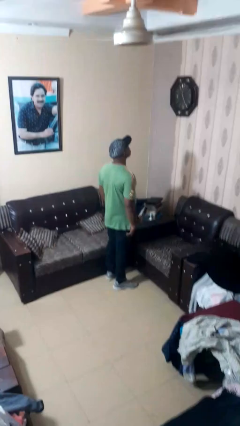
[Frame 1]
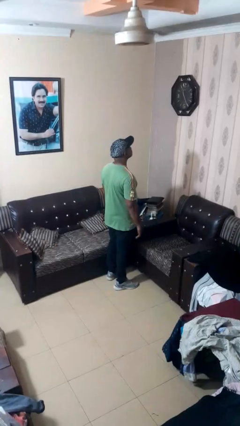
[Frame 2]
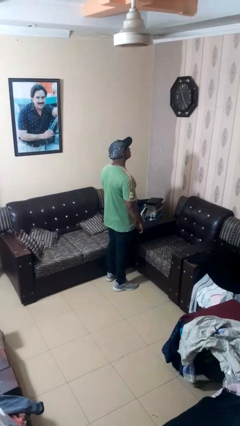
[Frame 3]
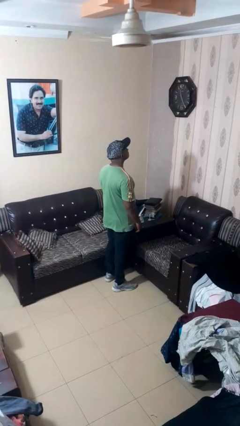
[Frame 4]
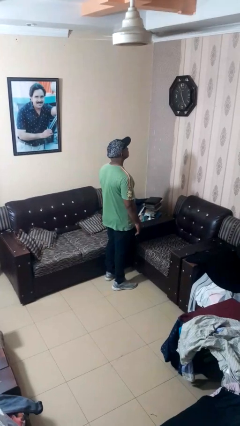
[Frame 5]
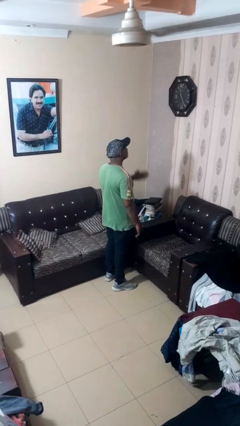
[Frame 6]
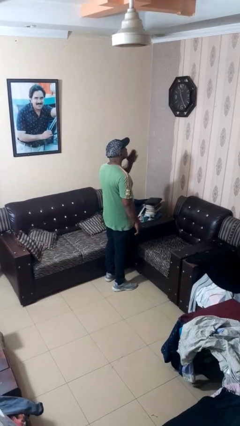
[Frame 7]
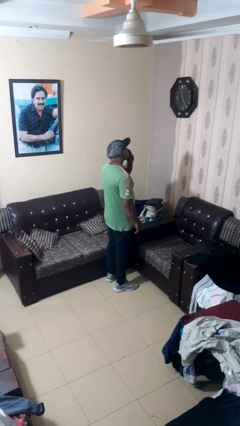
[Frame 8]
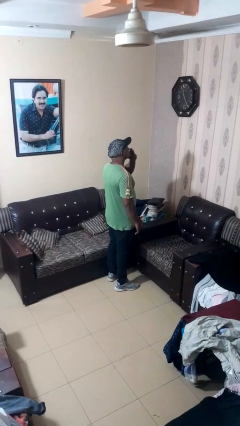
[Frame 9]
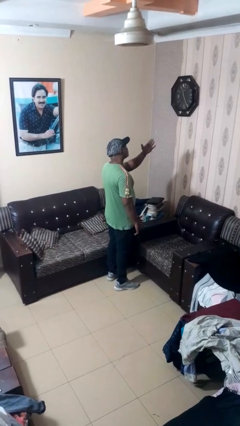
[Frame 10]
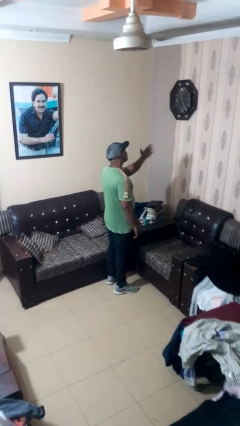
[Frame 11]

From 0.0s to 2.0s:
person gestures blow kiss

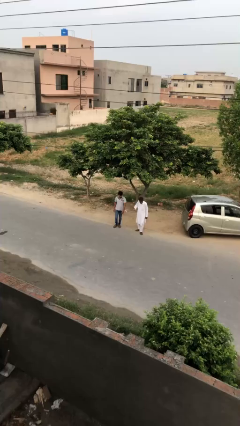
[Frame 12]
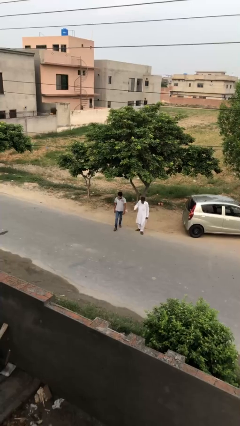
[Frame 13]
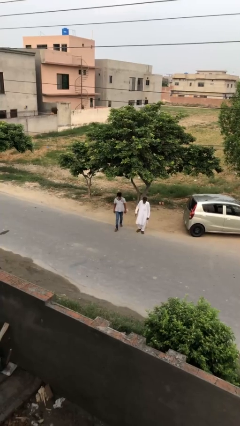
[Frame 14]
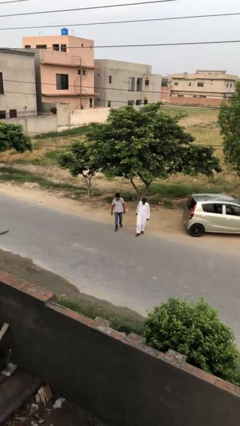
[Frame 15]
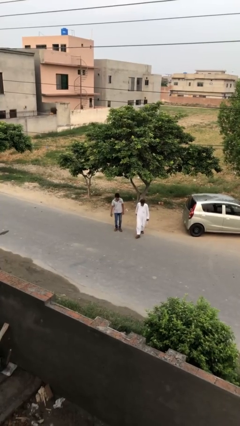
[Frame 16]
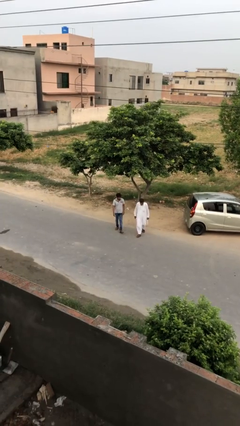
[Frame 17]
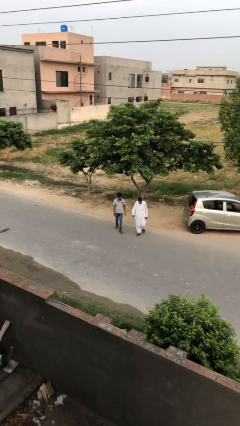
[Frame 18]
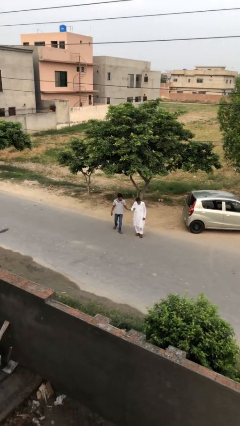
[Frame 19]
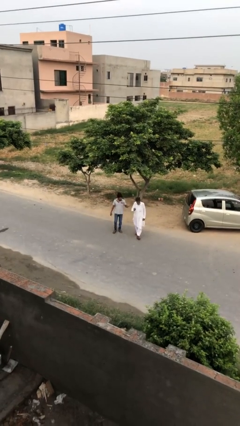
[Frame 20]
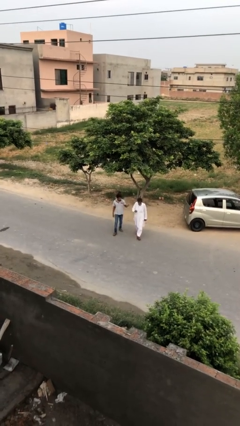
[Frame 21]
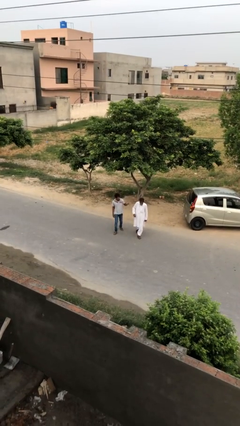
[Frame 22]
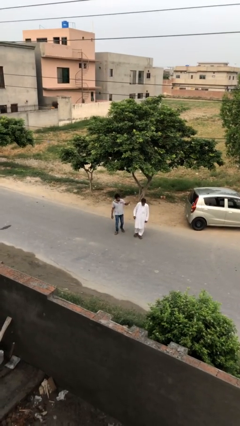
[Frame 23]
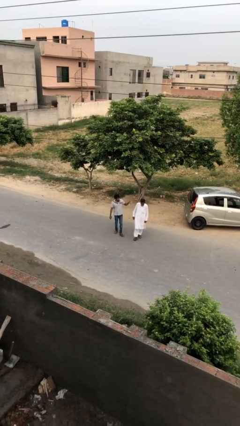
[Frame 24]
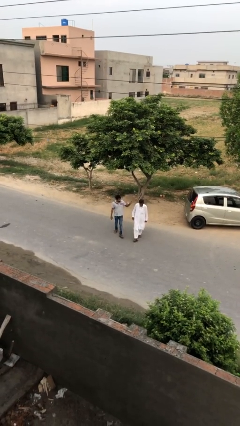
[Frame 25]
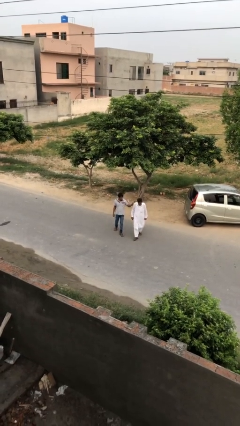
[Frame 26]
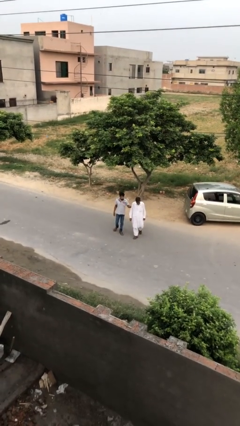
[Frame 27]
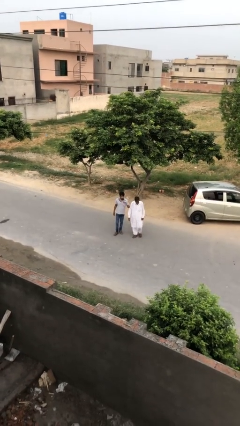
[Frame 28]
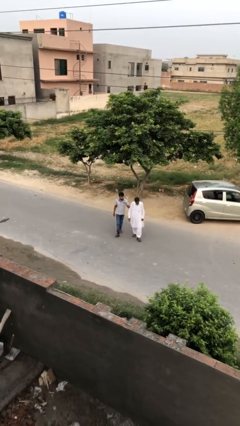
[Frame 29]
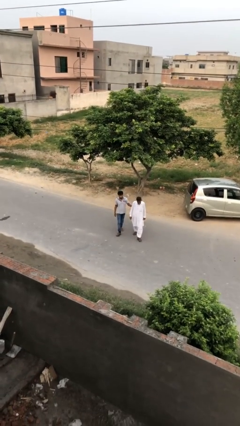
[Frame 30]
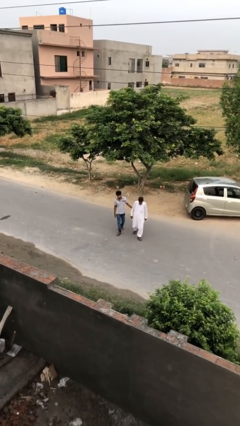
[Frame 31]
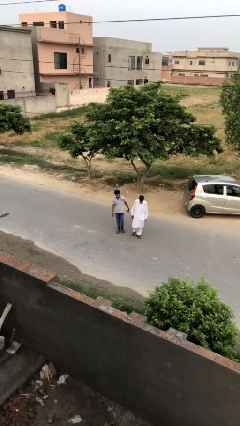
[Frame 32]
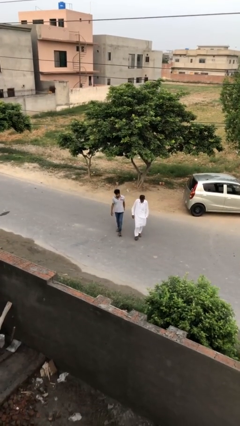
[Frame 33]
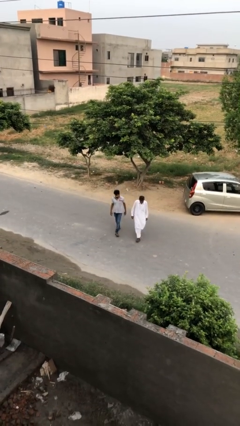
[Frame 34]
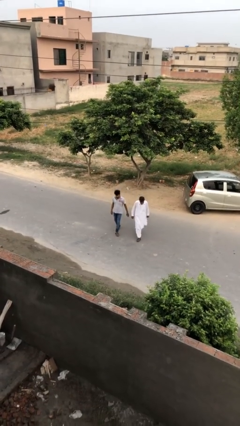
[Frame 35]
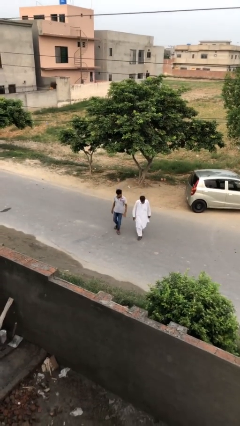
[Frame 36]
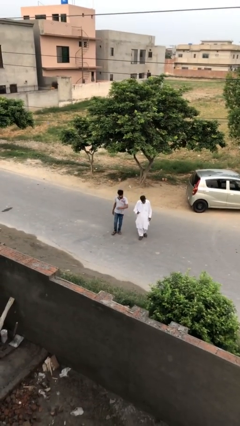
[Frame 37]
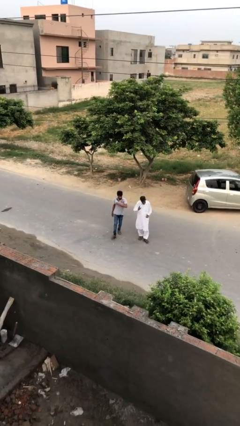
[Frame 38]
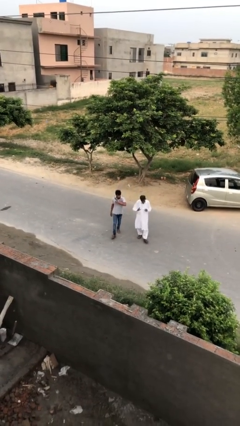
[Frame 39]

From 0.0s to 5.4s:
person talks to person

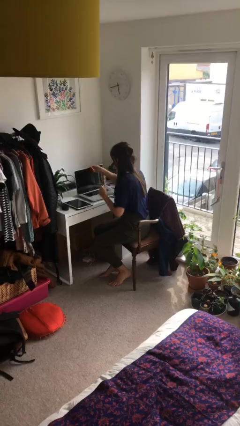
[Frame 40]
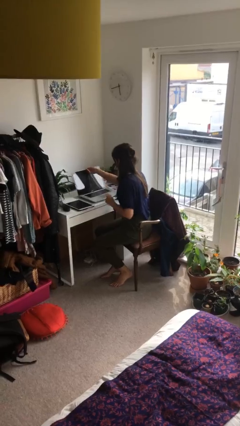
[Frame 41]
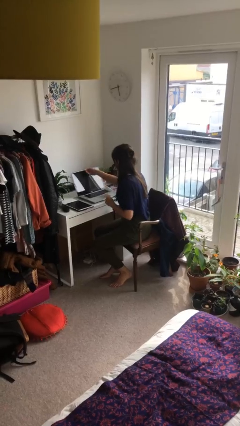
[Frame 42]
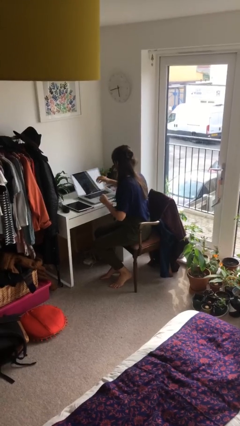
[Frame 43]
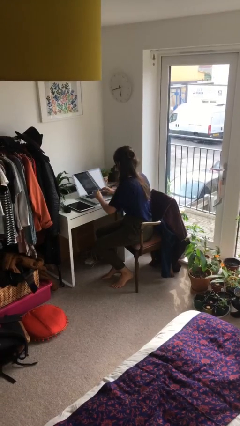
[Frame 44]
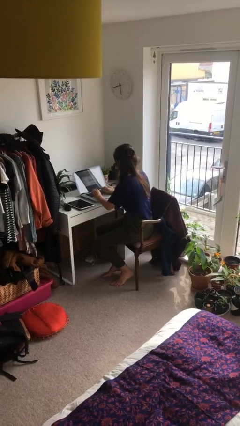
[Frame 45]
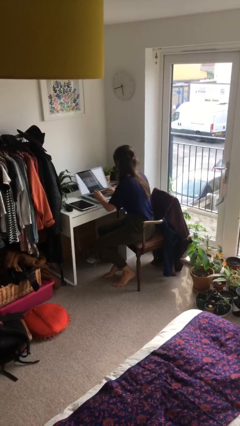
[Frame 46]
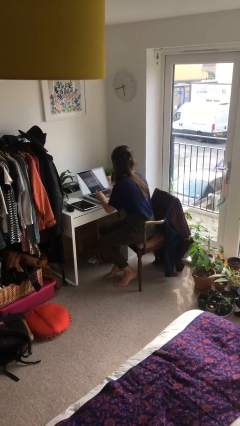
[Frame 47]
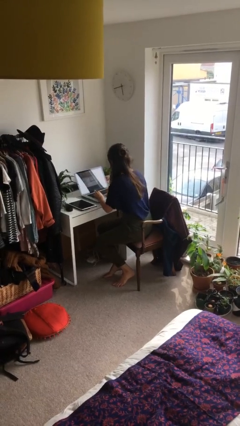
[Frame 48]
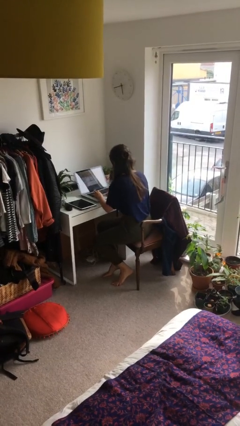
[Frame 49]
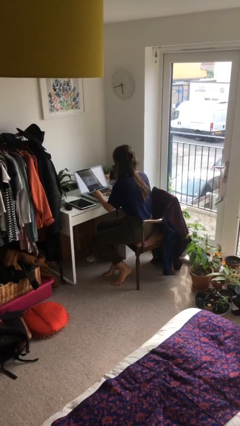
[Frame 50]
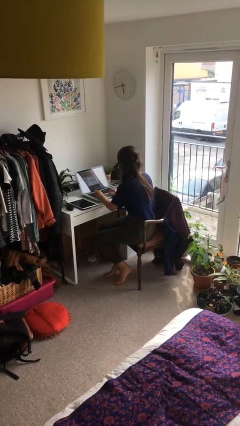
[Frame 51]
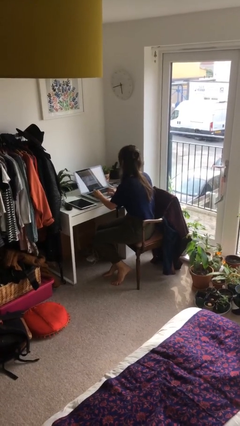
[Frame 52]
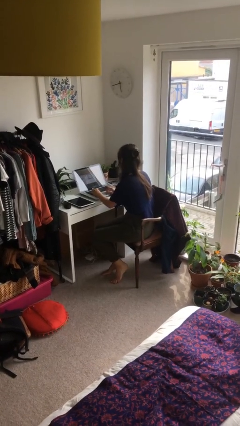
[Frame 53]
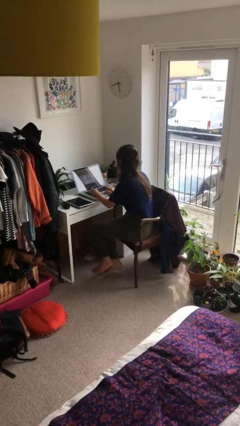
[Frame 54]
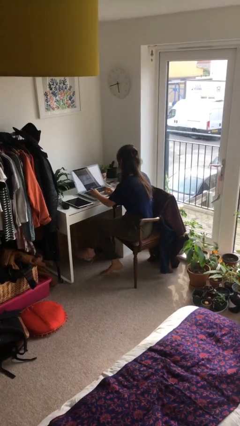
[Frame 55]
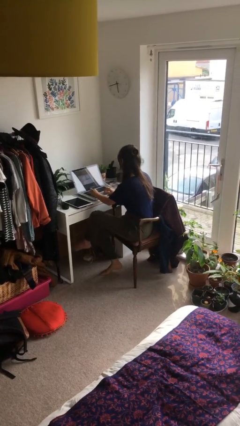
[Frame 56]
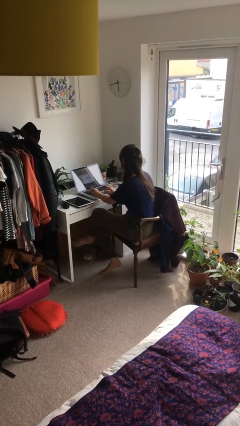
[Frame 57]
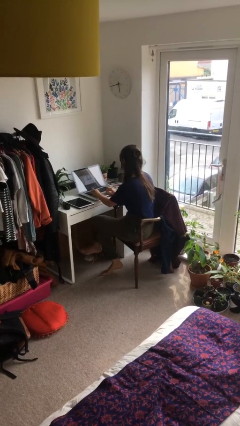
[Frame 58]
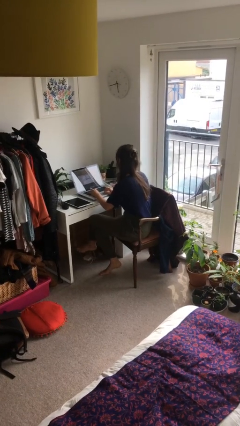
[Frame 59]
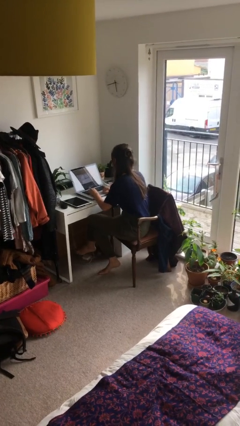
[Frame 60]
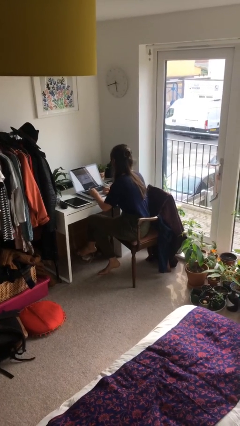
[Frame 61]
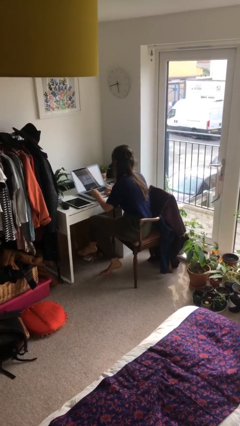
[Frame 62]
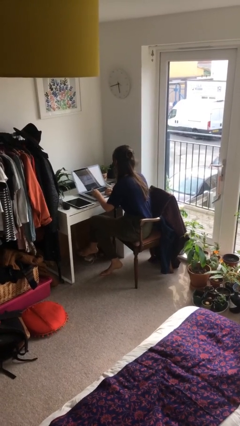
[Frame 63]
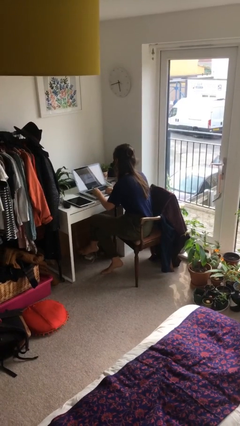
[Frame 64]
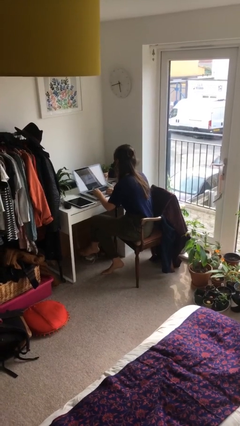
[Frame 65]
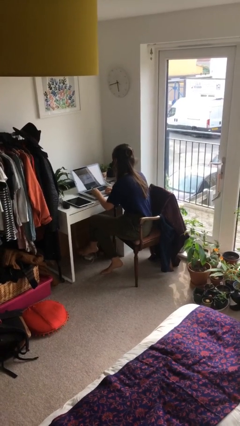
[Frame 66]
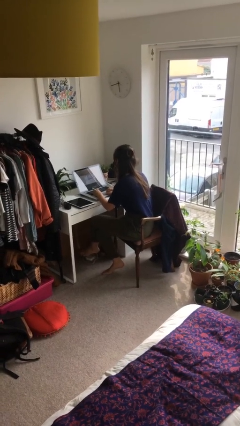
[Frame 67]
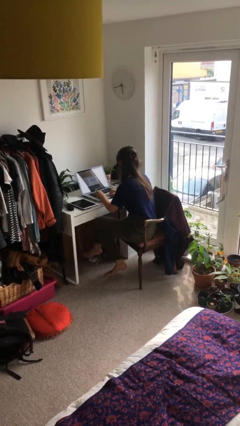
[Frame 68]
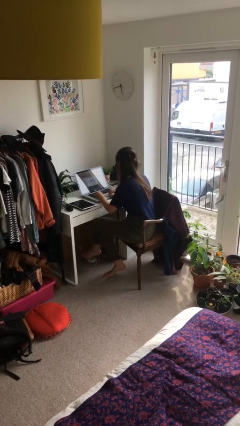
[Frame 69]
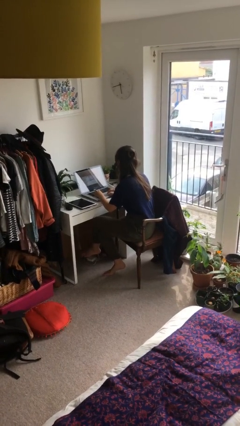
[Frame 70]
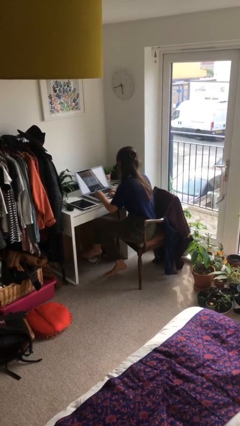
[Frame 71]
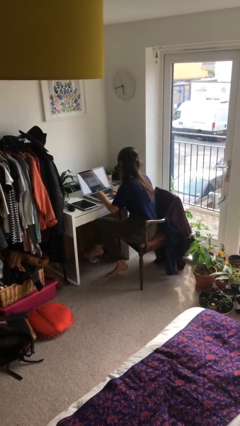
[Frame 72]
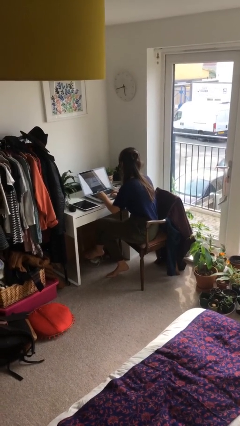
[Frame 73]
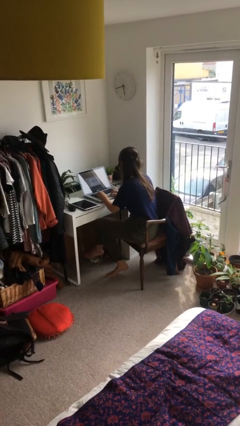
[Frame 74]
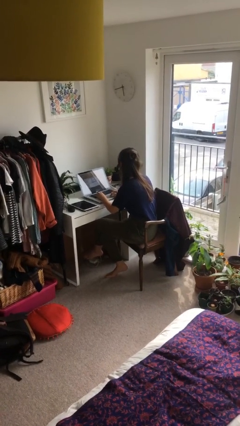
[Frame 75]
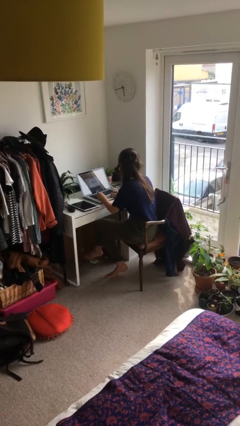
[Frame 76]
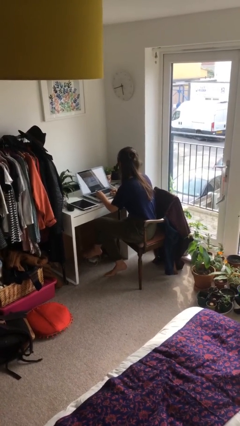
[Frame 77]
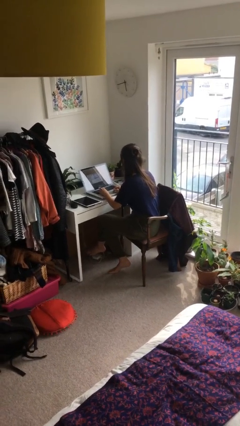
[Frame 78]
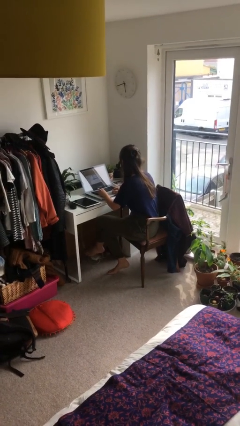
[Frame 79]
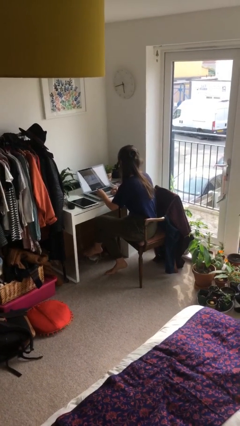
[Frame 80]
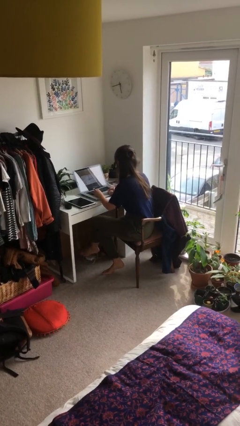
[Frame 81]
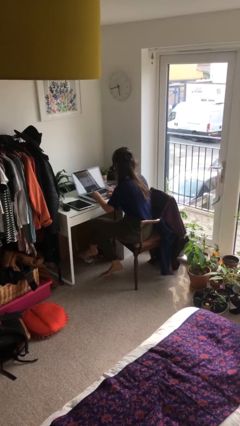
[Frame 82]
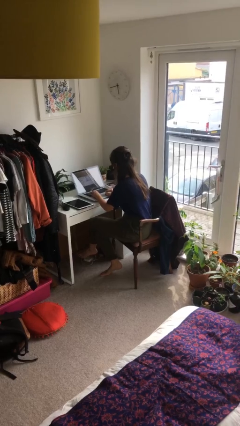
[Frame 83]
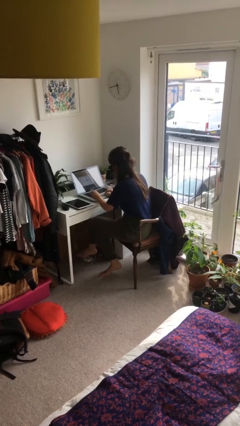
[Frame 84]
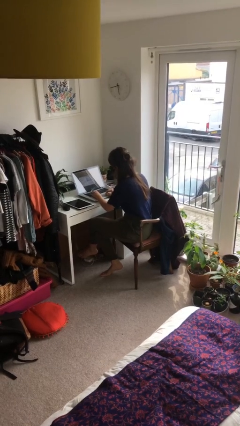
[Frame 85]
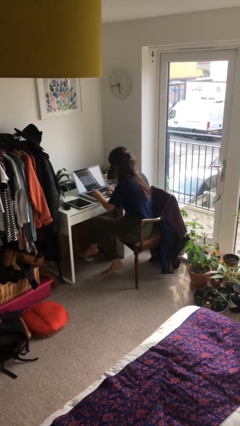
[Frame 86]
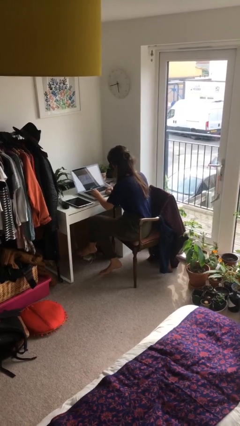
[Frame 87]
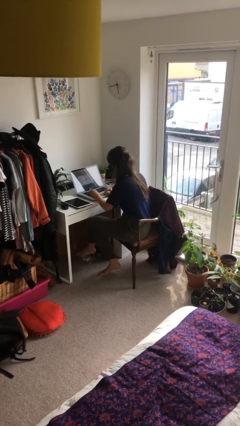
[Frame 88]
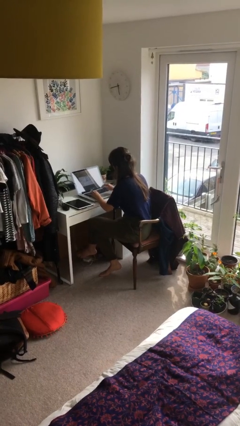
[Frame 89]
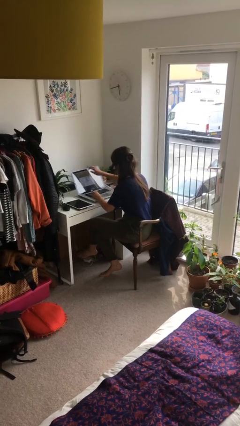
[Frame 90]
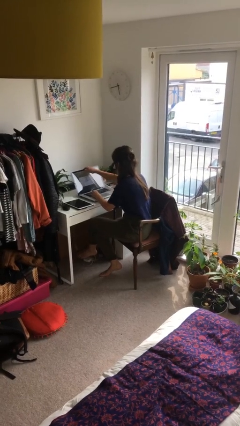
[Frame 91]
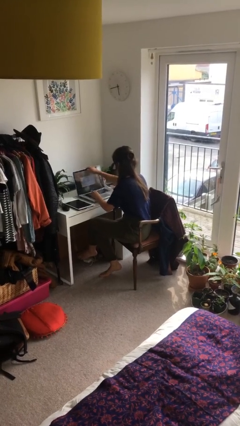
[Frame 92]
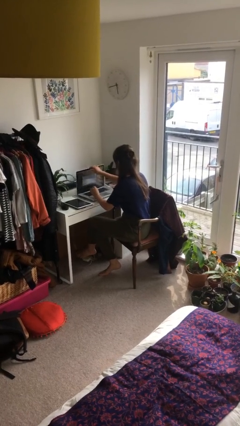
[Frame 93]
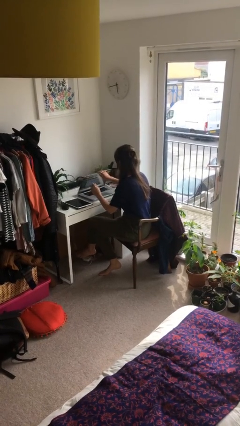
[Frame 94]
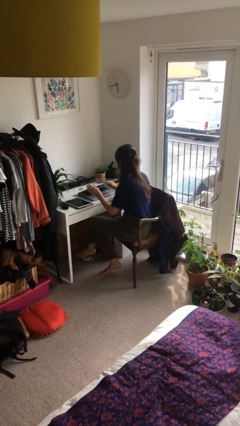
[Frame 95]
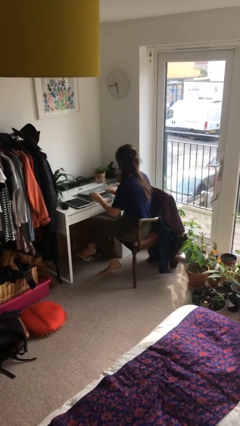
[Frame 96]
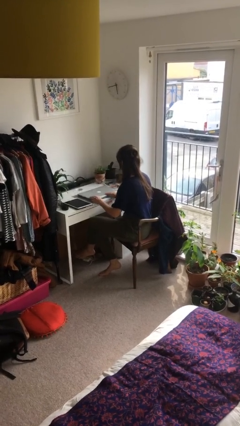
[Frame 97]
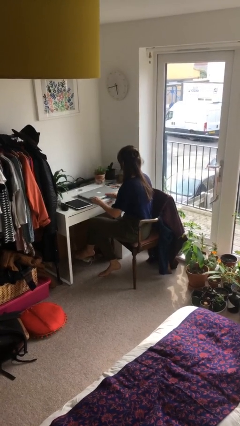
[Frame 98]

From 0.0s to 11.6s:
person interacts with laptop
